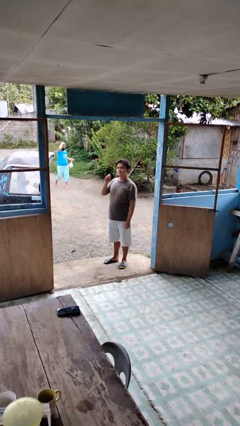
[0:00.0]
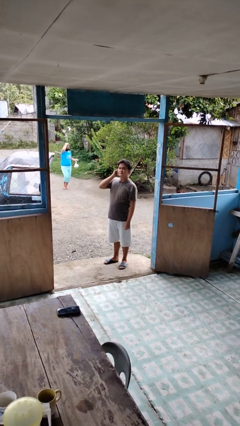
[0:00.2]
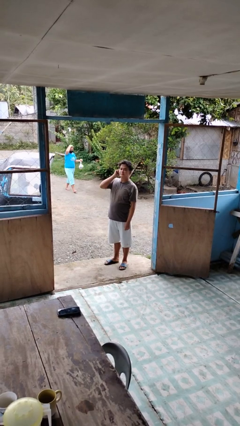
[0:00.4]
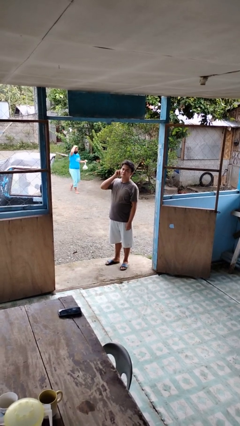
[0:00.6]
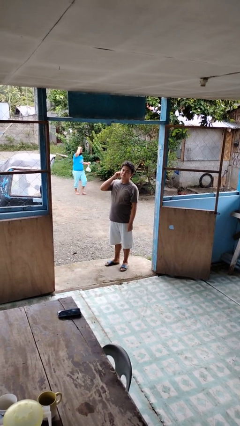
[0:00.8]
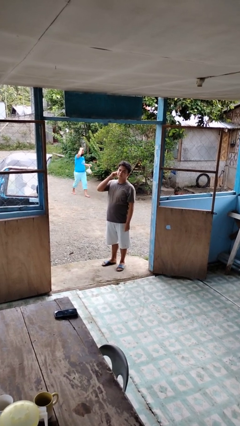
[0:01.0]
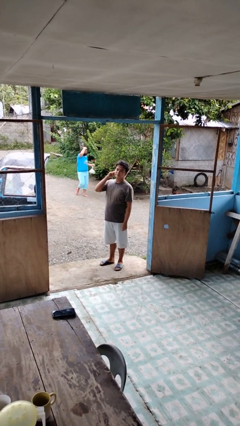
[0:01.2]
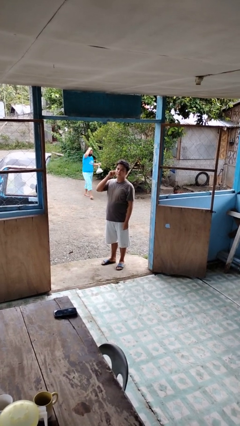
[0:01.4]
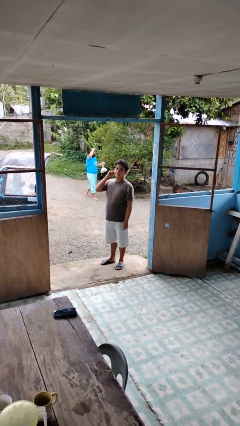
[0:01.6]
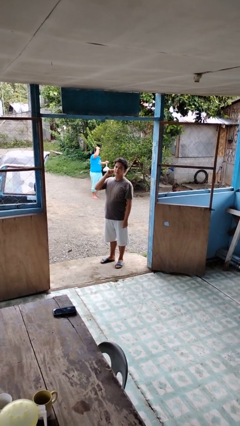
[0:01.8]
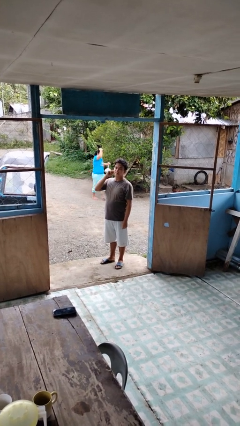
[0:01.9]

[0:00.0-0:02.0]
person touches earlobe

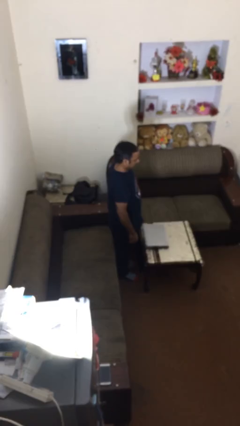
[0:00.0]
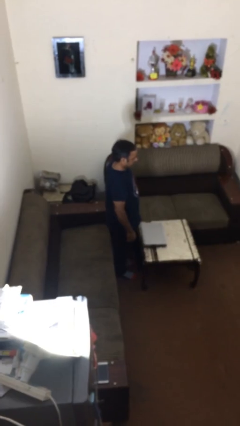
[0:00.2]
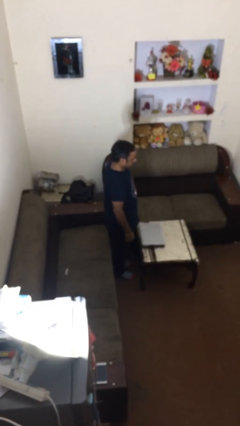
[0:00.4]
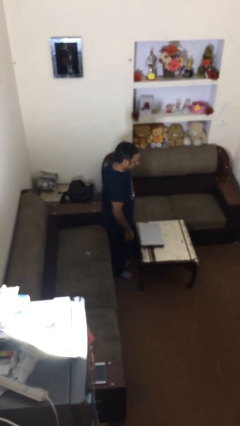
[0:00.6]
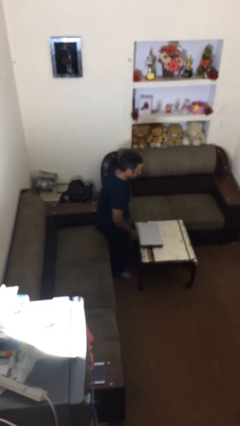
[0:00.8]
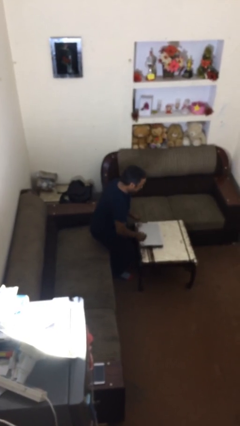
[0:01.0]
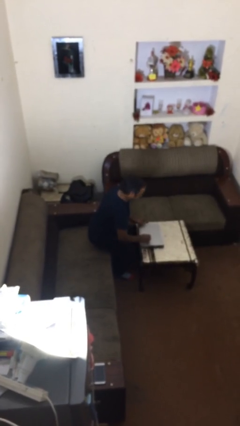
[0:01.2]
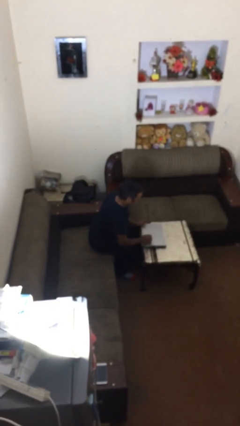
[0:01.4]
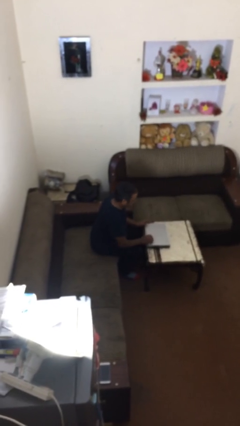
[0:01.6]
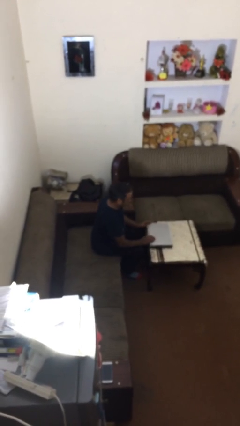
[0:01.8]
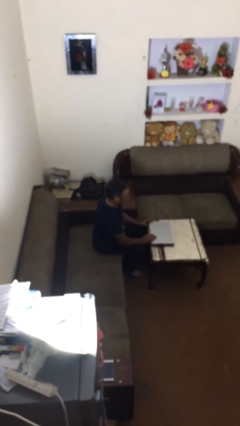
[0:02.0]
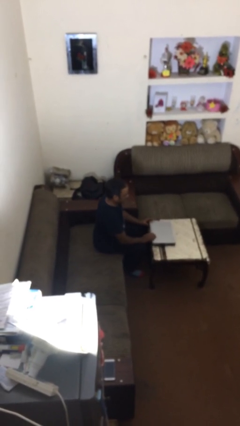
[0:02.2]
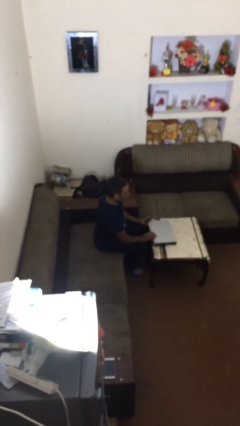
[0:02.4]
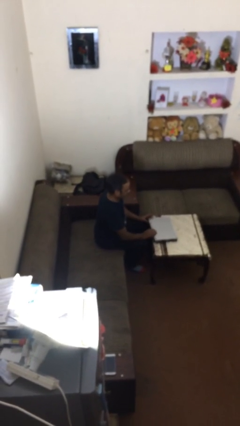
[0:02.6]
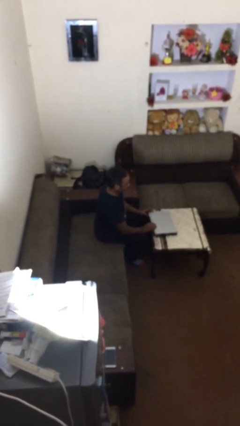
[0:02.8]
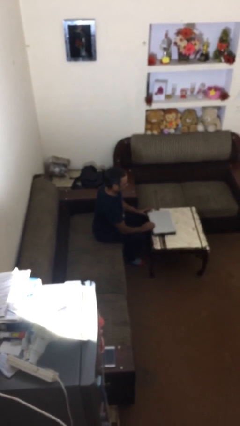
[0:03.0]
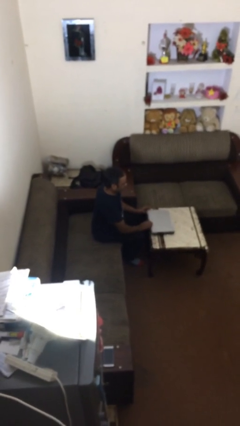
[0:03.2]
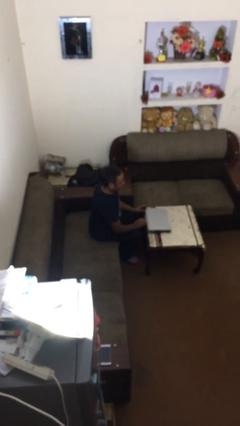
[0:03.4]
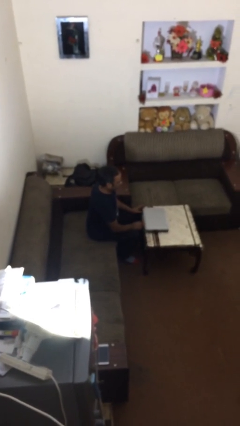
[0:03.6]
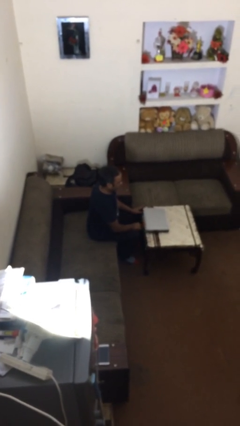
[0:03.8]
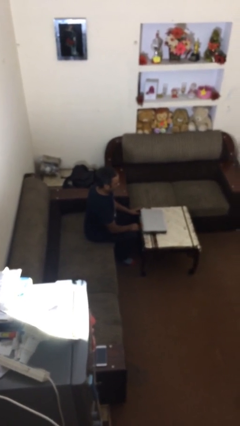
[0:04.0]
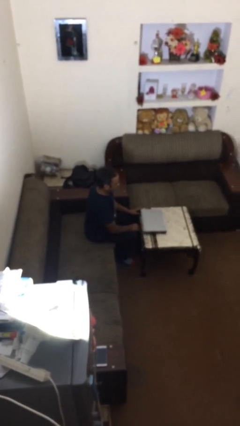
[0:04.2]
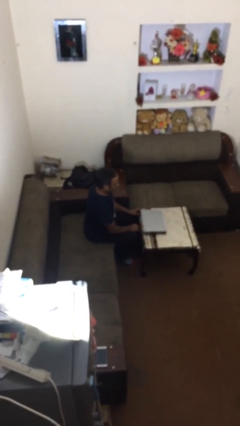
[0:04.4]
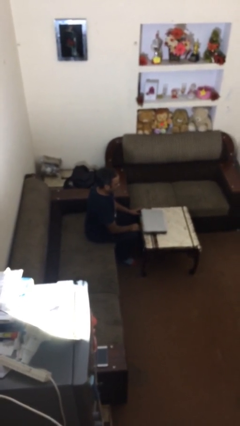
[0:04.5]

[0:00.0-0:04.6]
person sits down

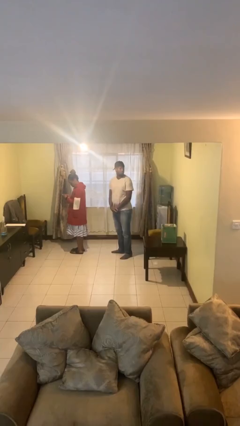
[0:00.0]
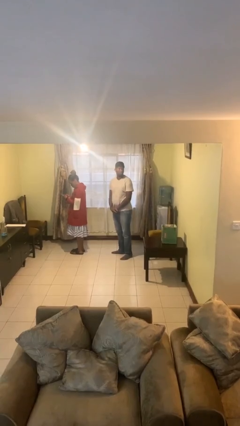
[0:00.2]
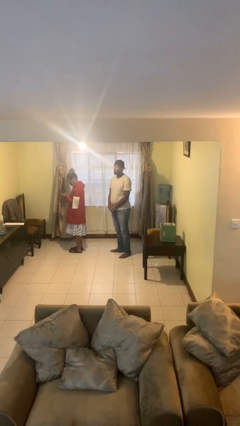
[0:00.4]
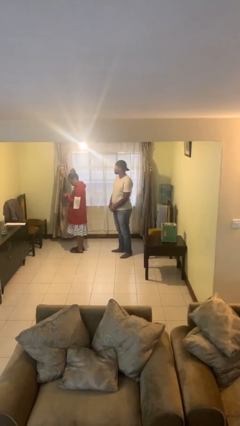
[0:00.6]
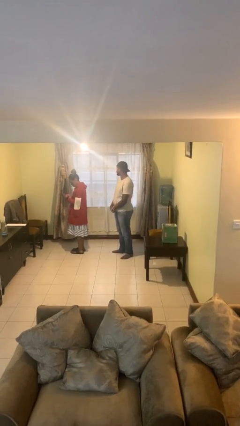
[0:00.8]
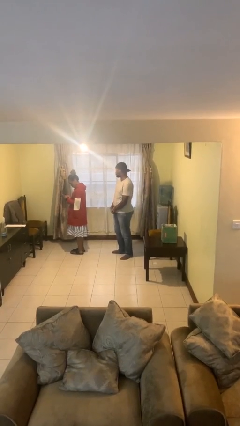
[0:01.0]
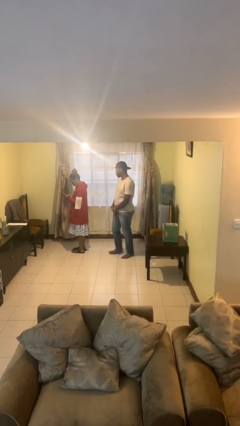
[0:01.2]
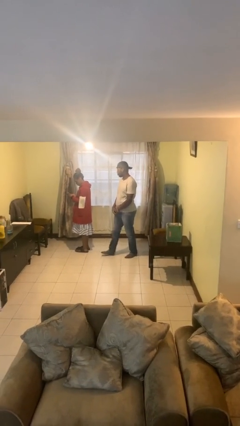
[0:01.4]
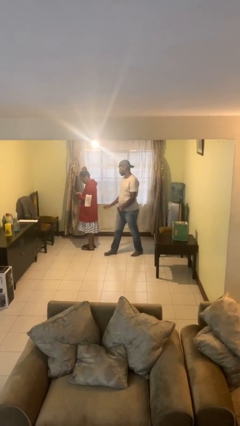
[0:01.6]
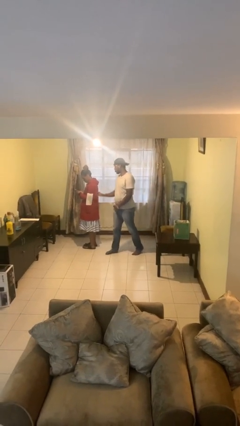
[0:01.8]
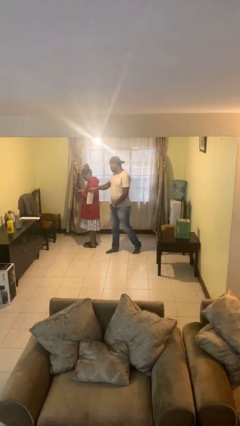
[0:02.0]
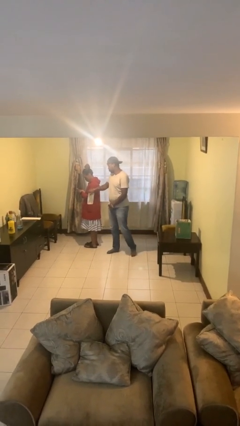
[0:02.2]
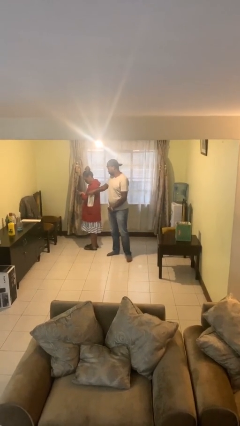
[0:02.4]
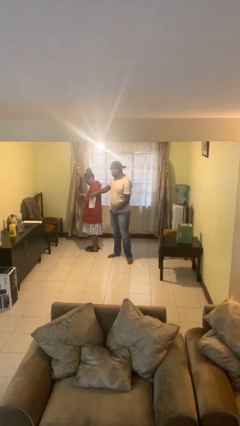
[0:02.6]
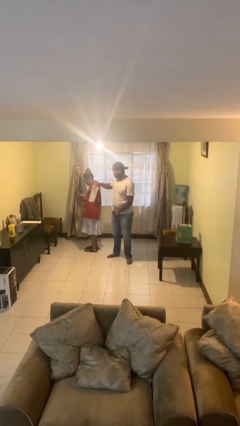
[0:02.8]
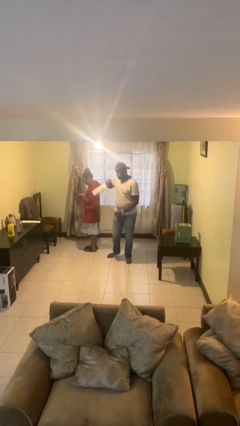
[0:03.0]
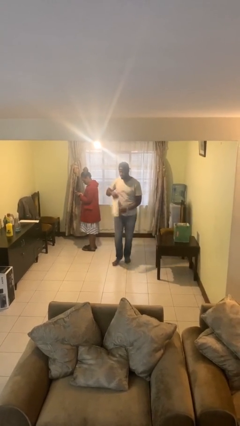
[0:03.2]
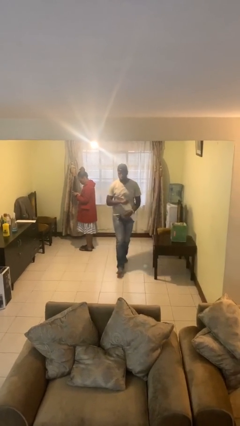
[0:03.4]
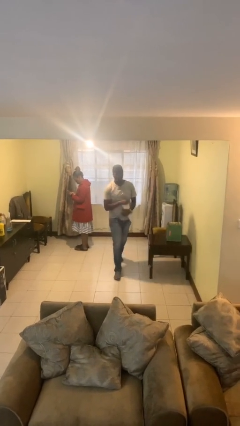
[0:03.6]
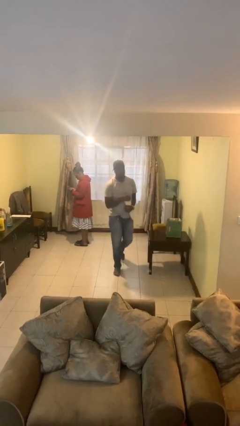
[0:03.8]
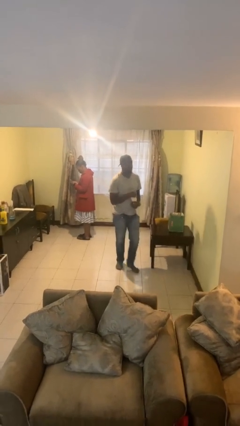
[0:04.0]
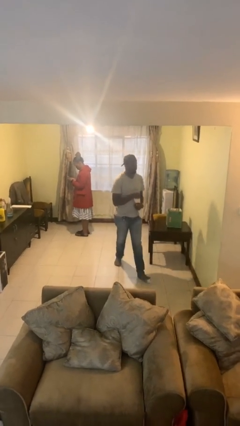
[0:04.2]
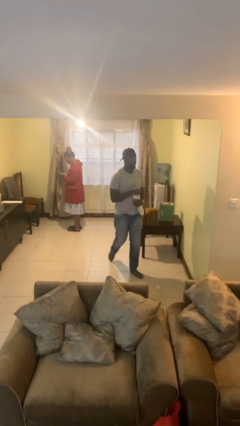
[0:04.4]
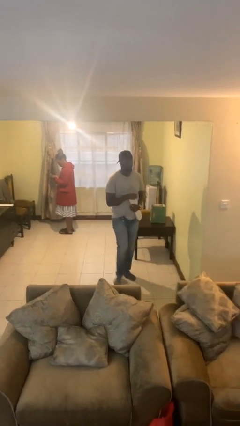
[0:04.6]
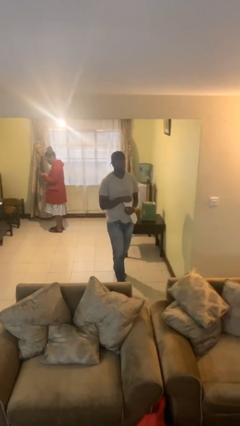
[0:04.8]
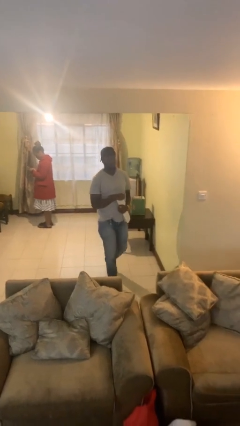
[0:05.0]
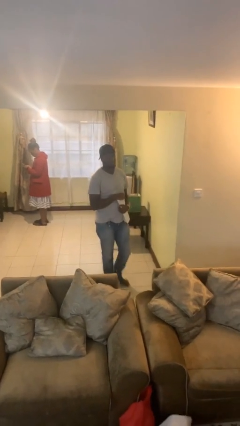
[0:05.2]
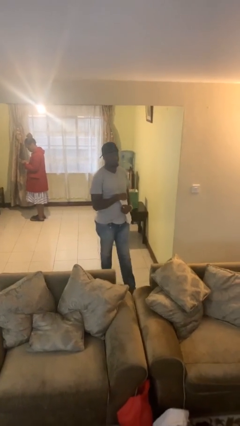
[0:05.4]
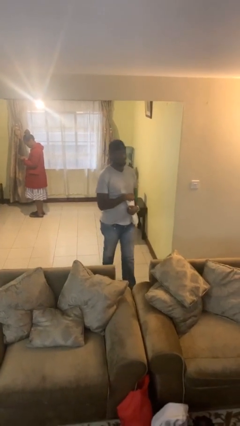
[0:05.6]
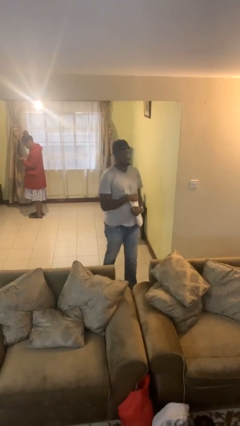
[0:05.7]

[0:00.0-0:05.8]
person steals object from person

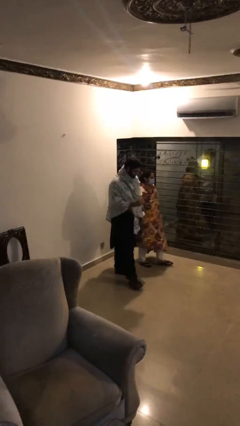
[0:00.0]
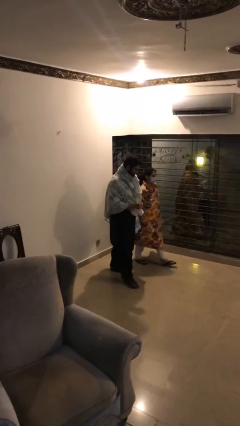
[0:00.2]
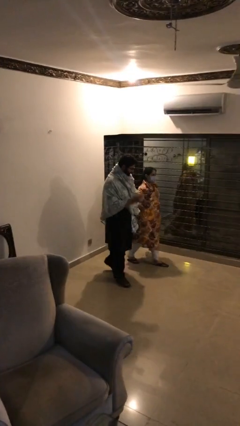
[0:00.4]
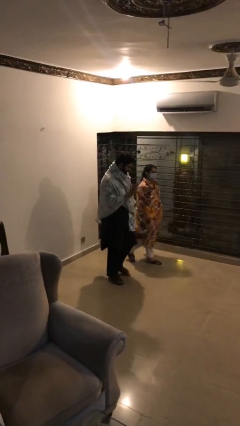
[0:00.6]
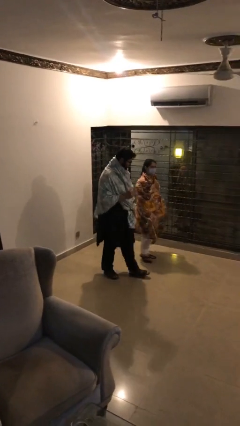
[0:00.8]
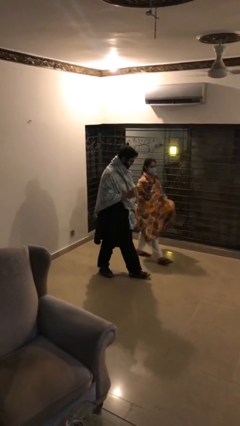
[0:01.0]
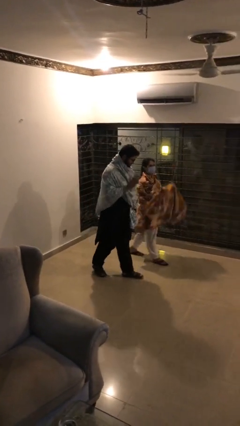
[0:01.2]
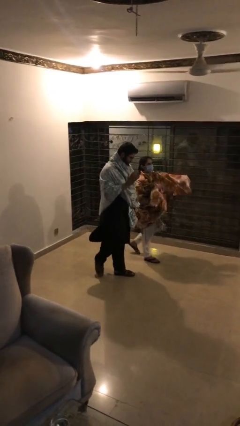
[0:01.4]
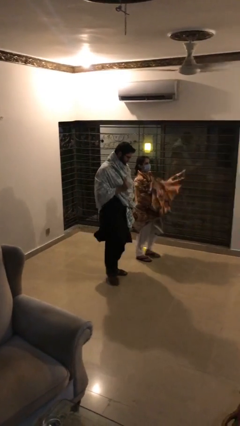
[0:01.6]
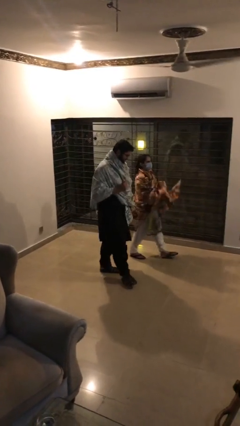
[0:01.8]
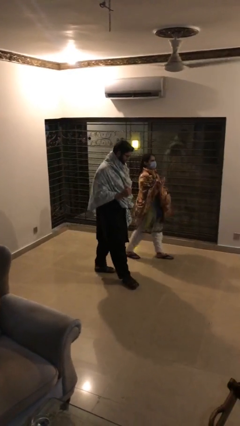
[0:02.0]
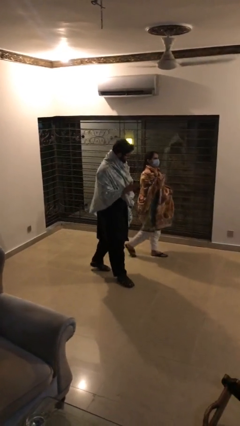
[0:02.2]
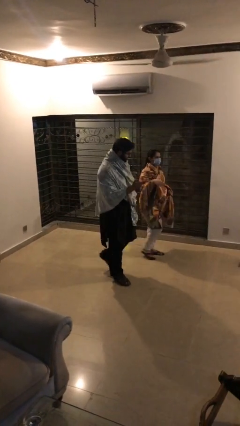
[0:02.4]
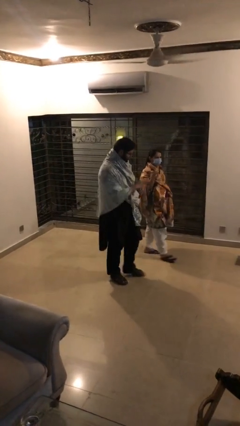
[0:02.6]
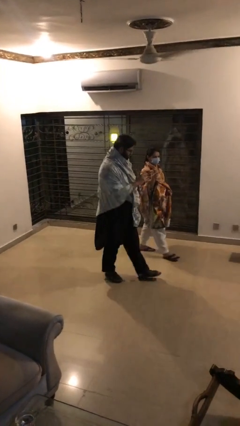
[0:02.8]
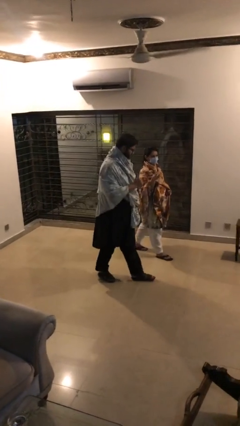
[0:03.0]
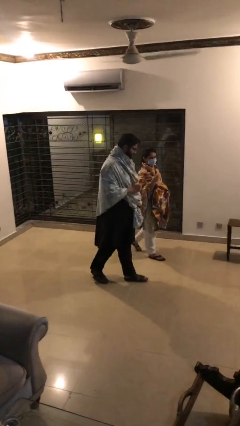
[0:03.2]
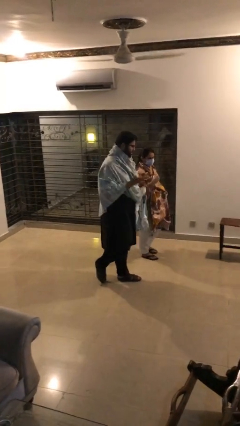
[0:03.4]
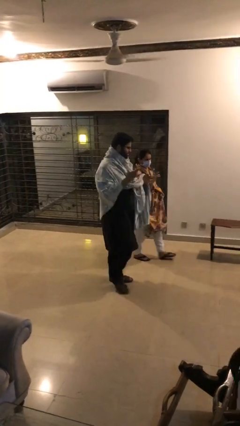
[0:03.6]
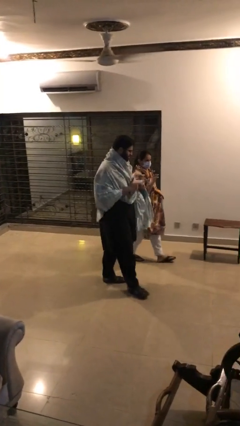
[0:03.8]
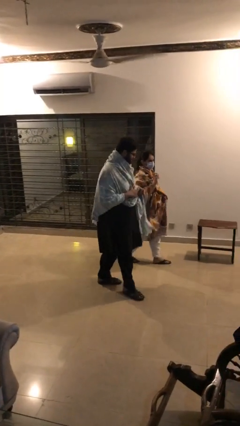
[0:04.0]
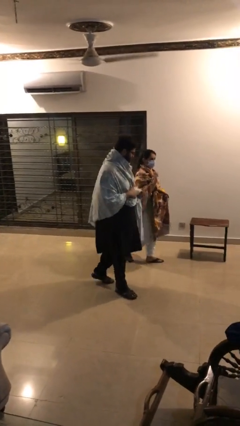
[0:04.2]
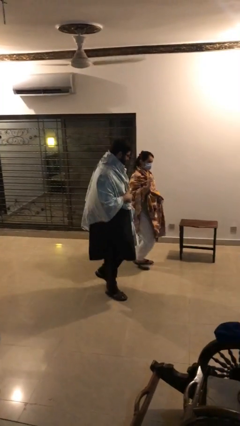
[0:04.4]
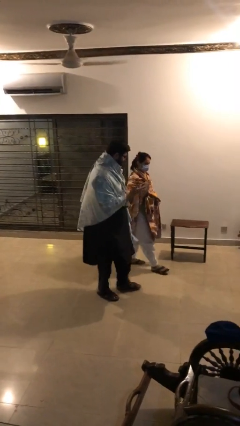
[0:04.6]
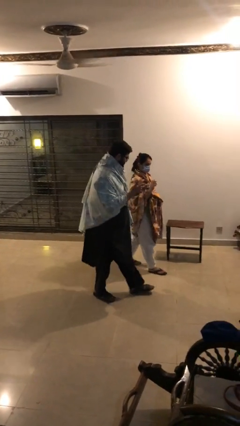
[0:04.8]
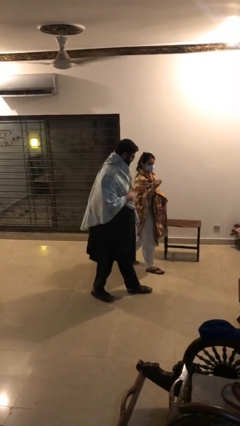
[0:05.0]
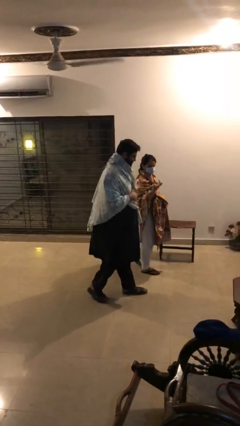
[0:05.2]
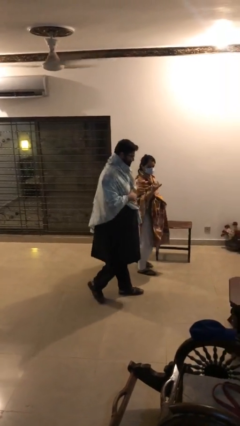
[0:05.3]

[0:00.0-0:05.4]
person talks to person

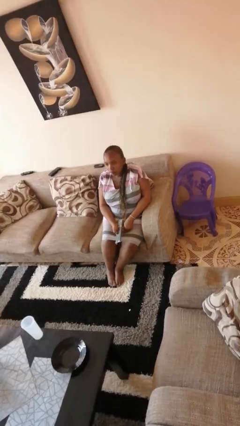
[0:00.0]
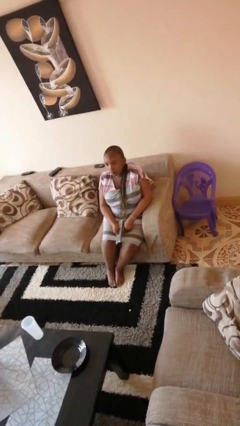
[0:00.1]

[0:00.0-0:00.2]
person uses television remote
